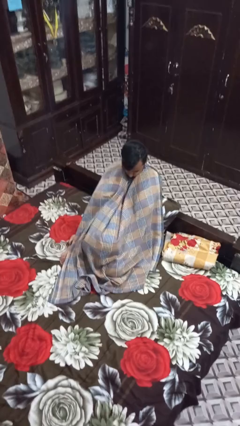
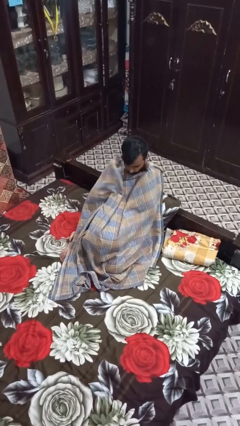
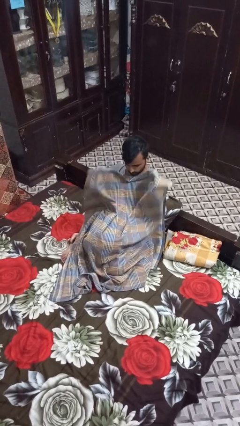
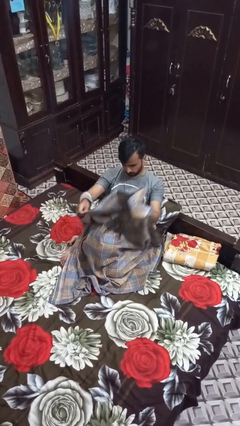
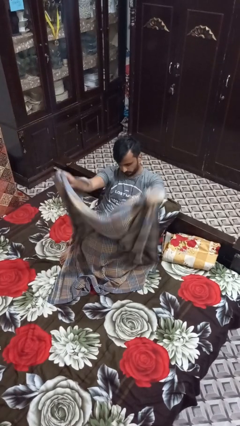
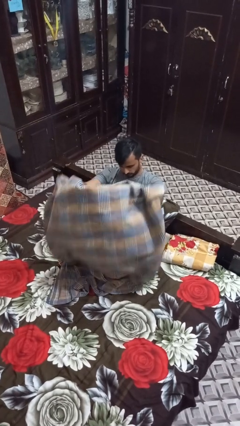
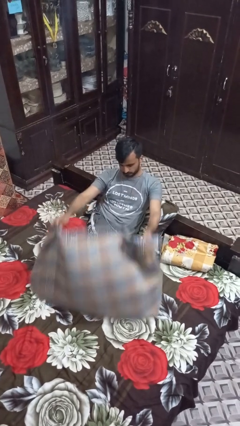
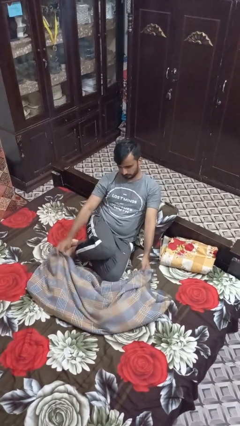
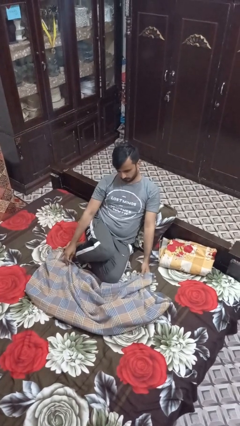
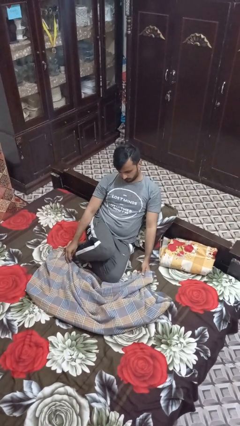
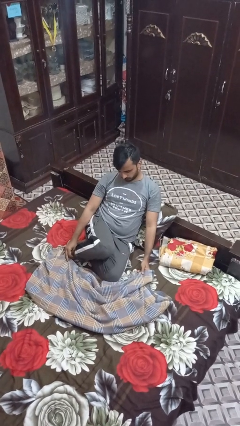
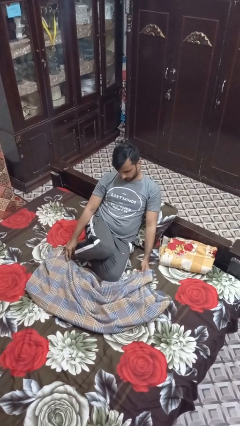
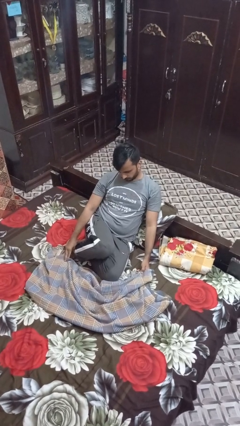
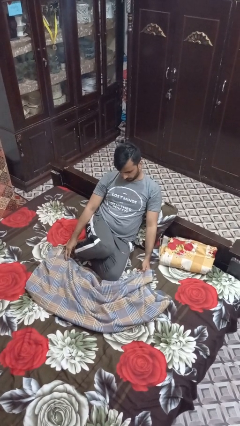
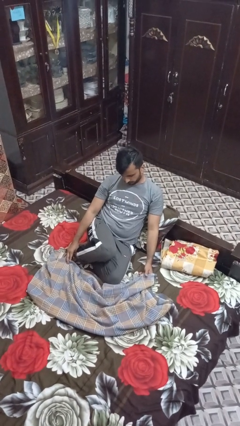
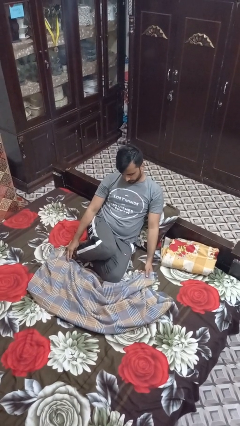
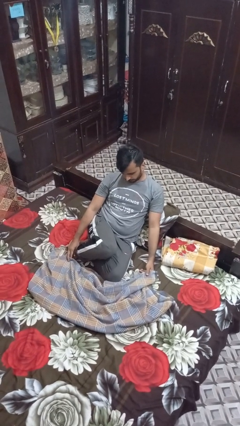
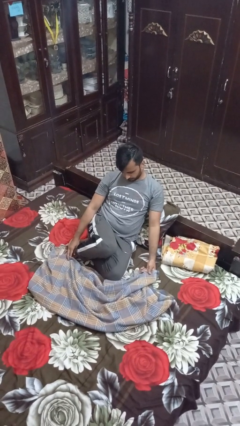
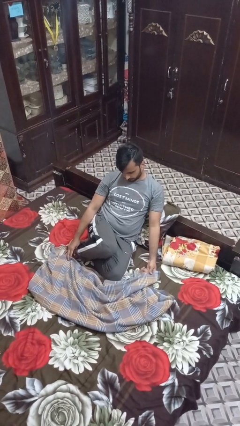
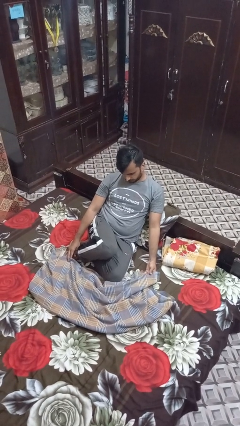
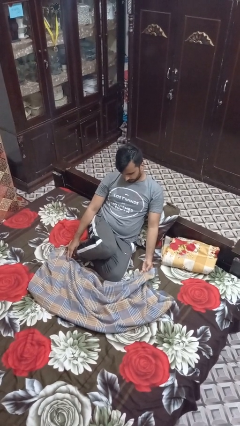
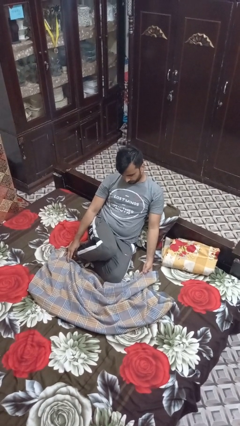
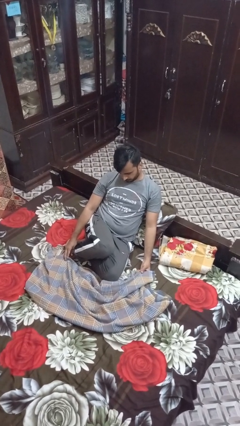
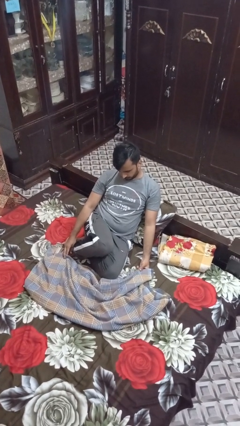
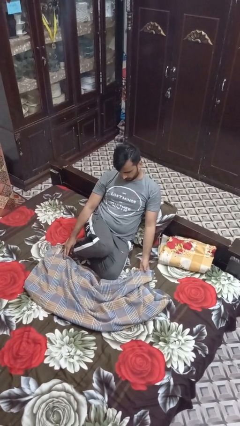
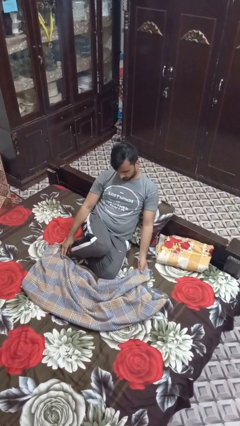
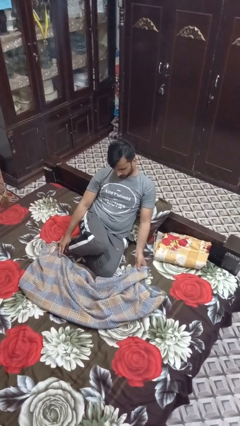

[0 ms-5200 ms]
person uncovers with blanket

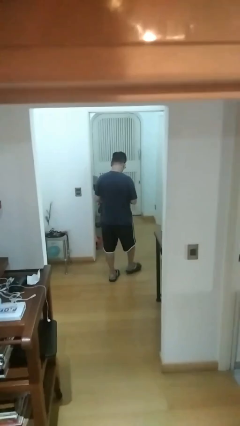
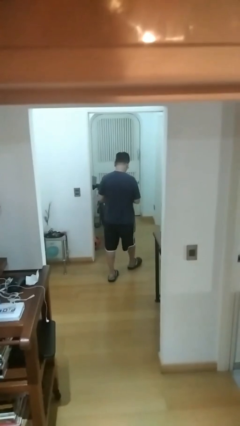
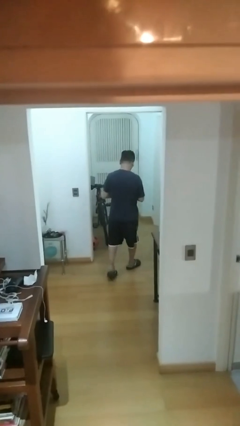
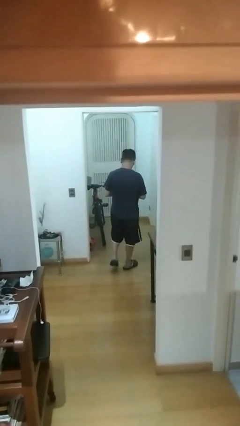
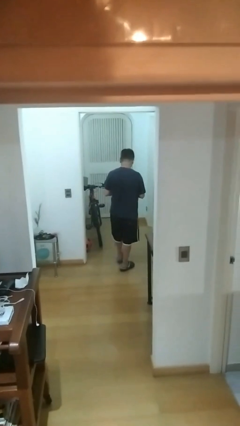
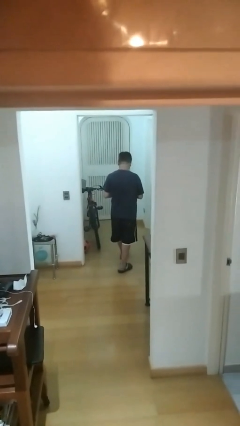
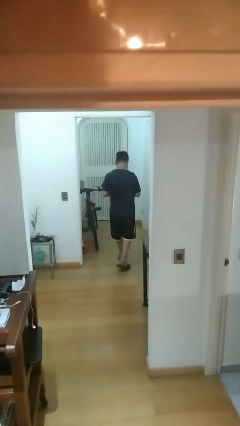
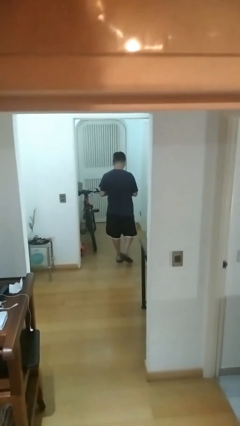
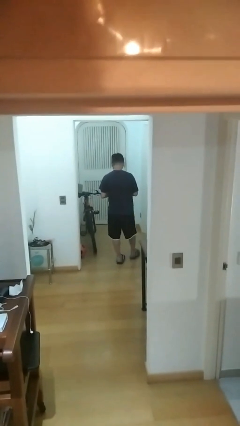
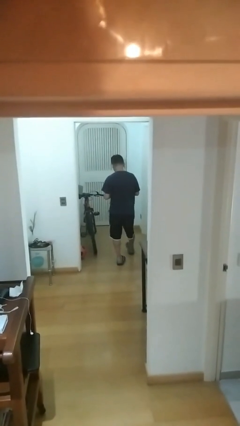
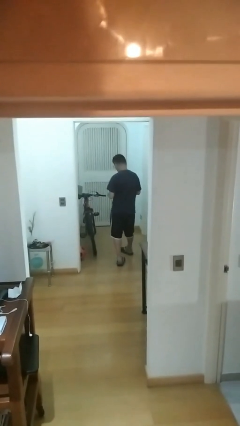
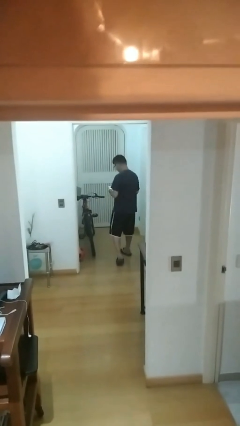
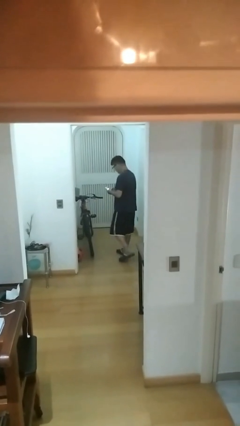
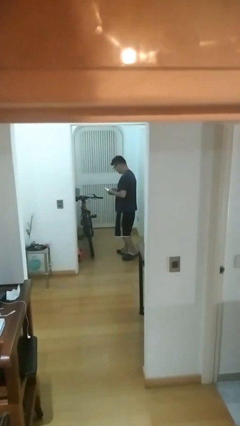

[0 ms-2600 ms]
person exits scene through structure

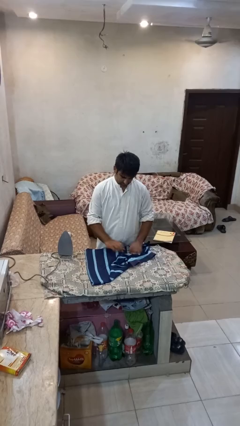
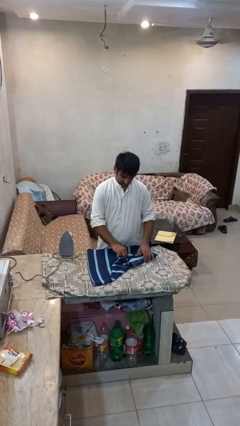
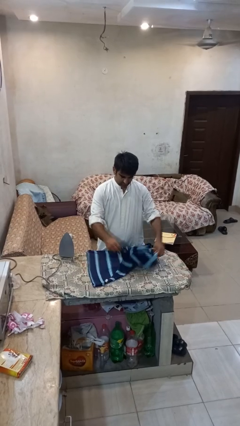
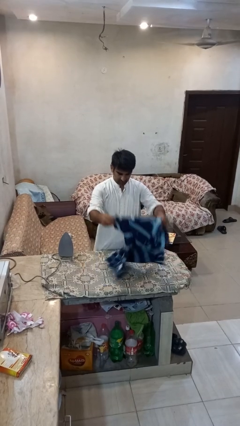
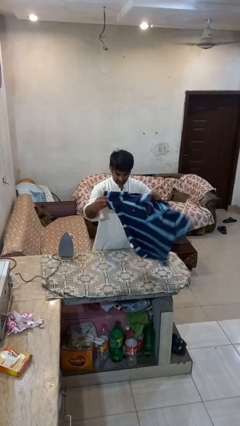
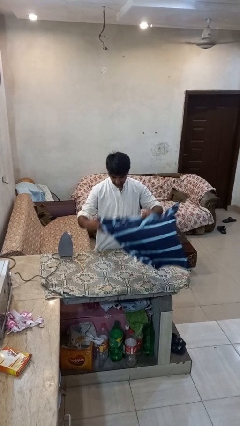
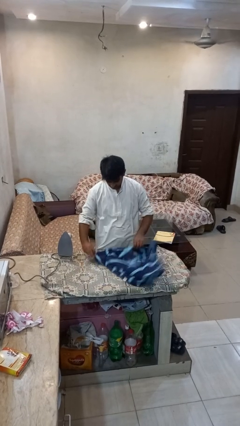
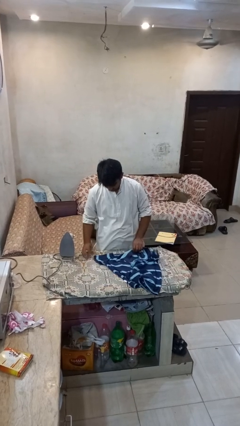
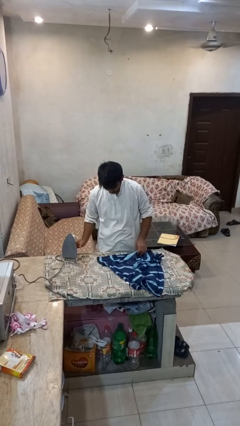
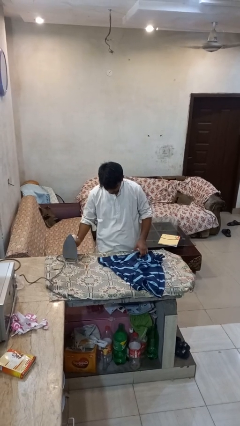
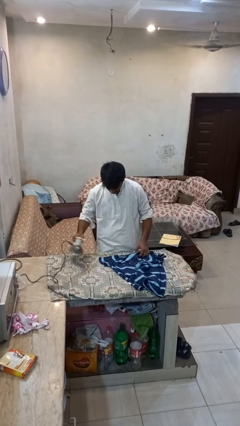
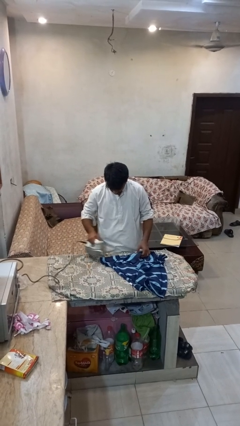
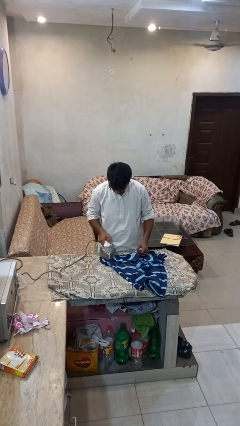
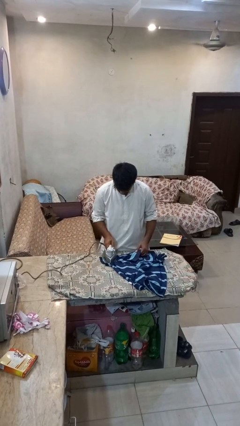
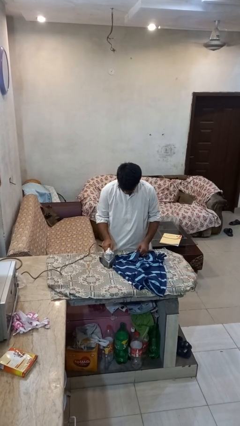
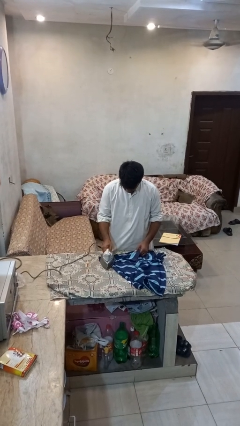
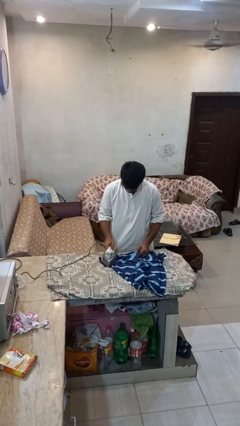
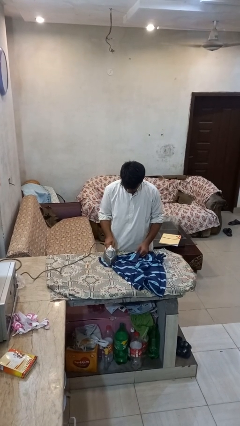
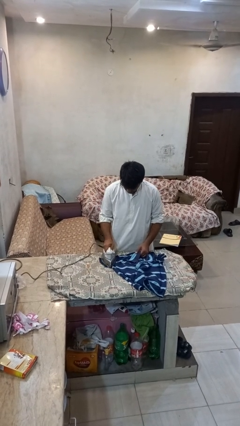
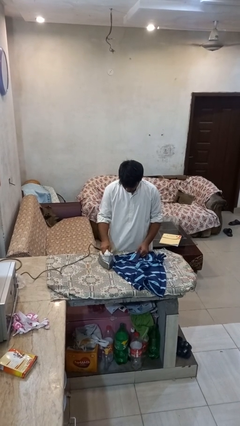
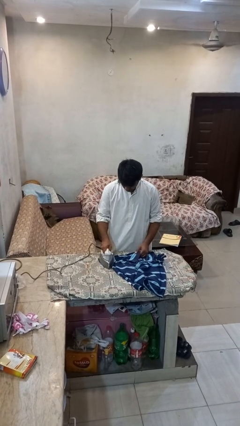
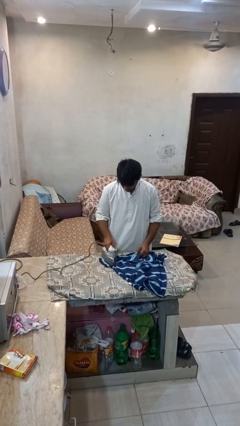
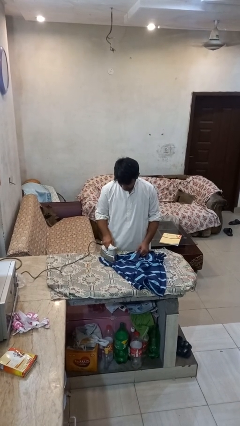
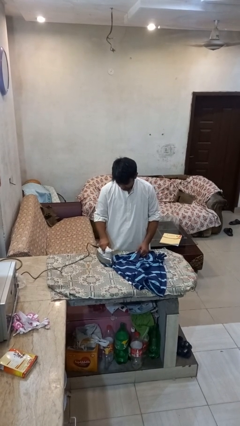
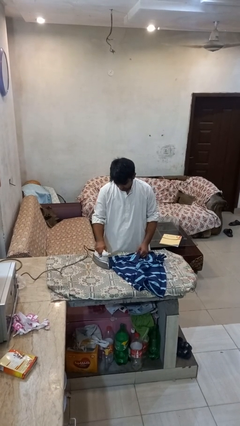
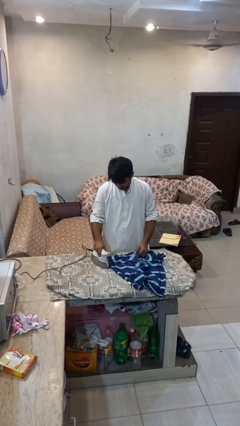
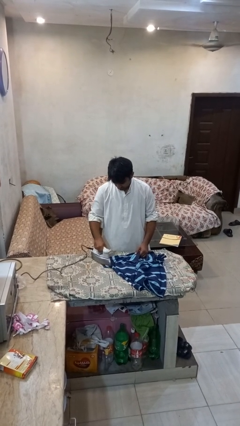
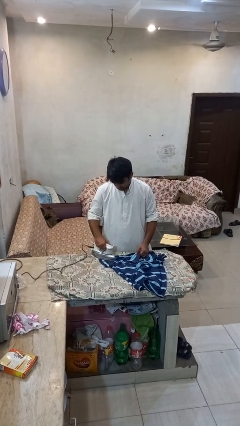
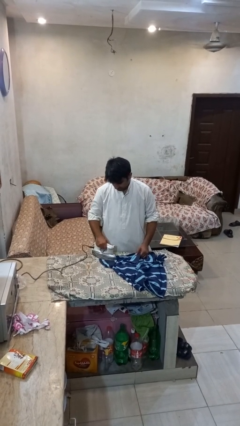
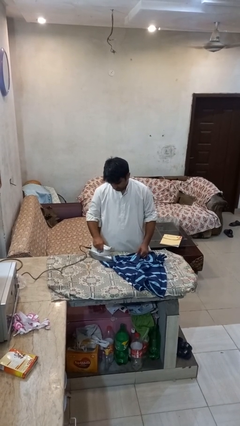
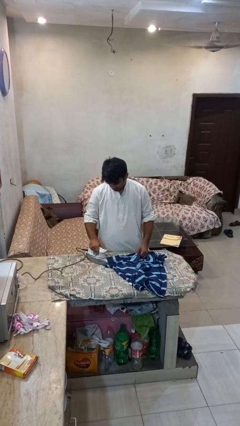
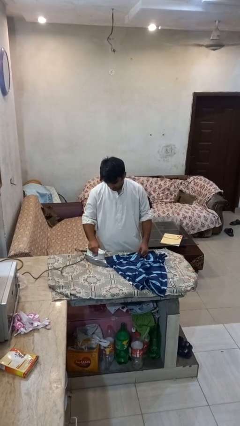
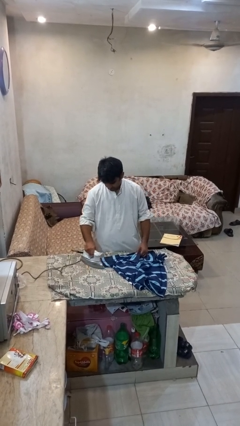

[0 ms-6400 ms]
person irons clothes

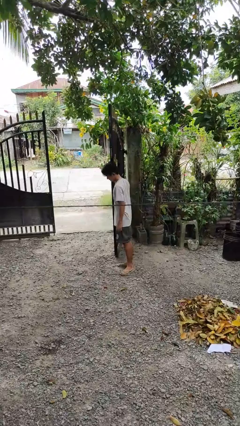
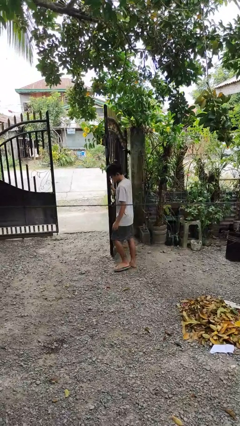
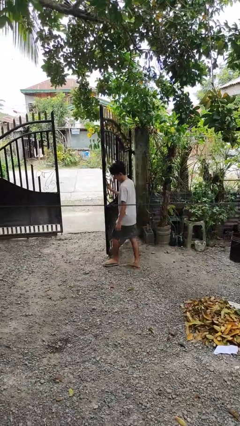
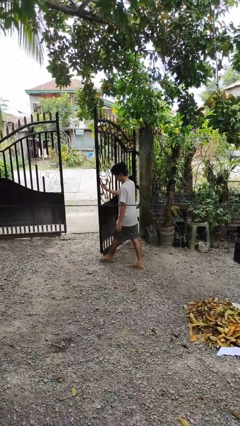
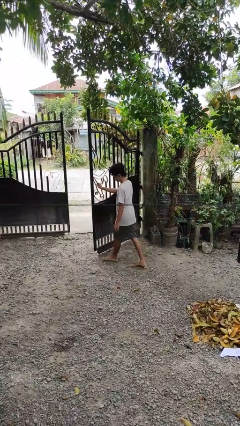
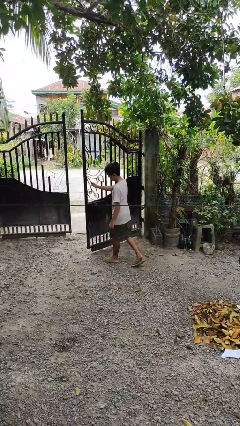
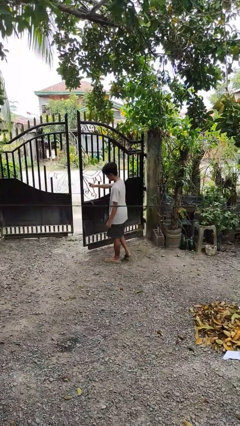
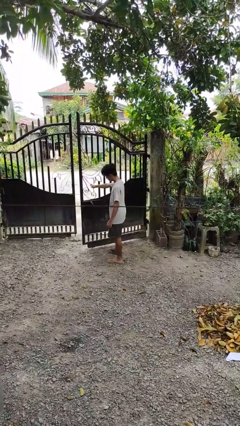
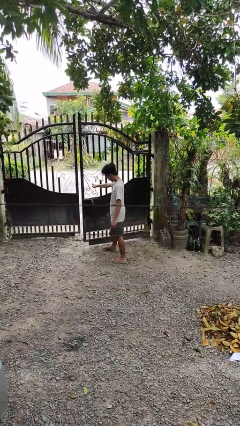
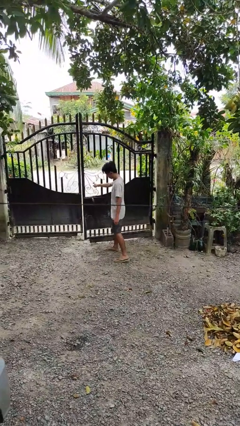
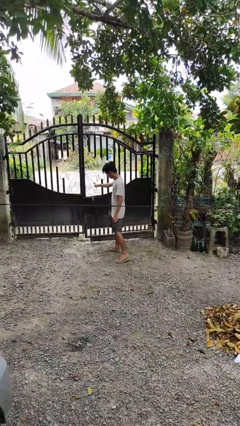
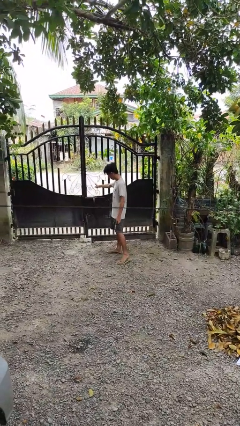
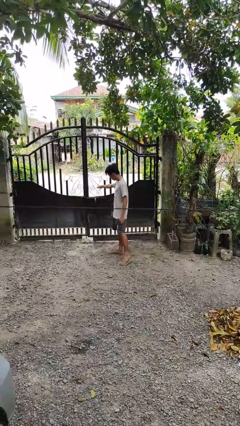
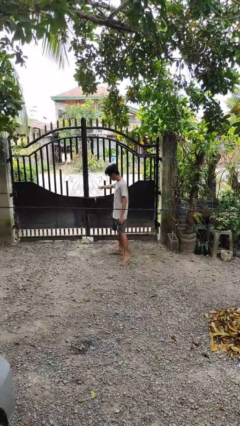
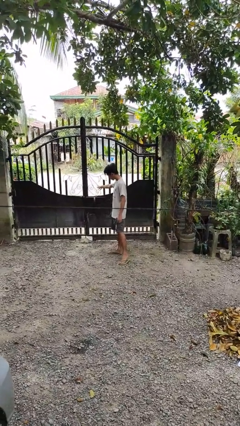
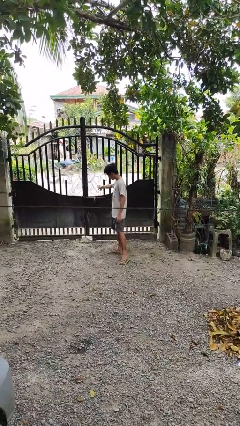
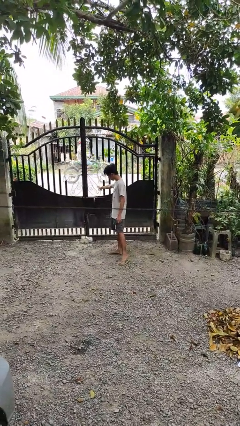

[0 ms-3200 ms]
person closes gate

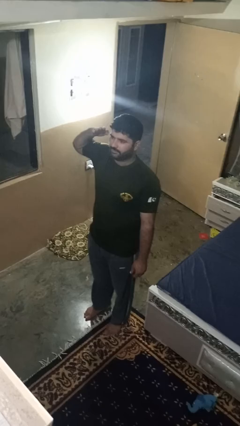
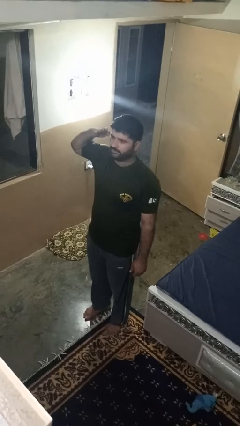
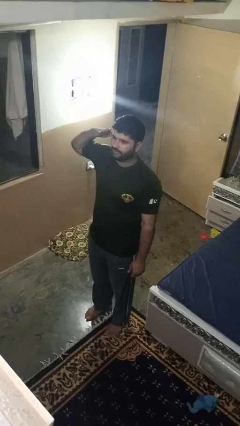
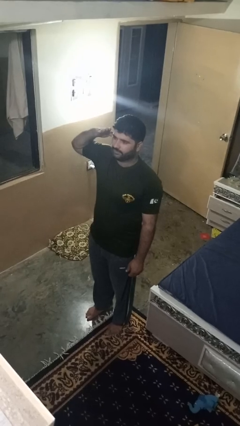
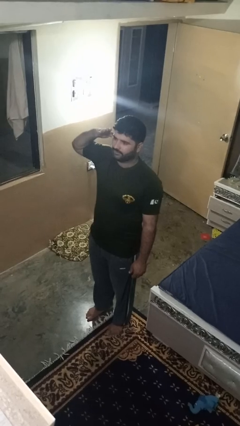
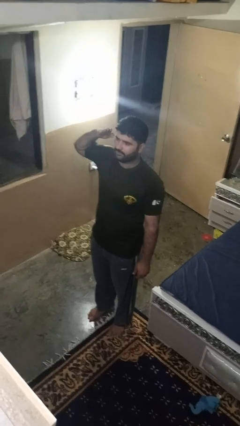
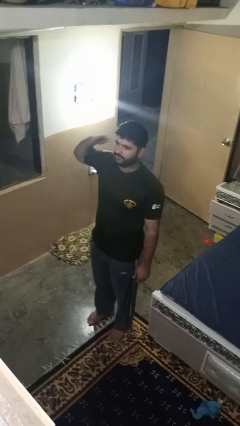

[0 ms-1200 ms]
person salutes
